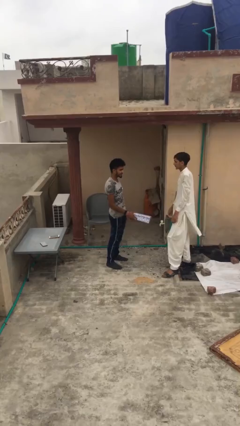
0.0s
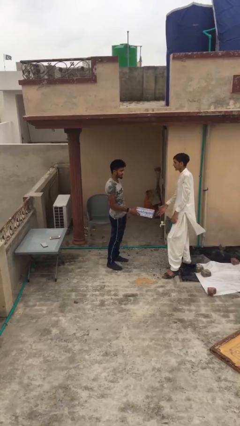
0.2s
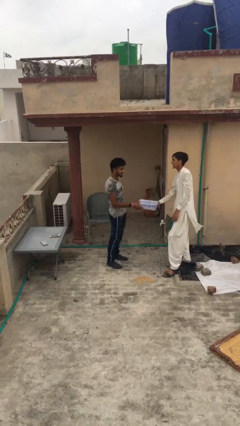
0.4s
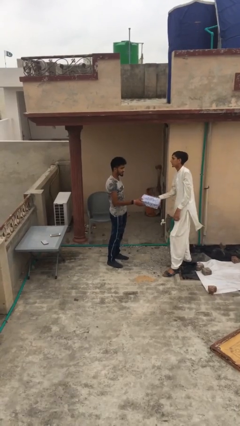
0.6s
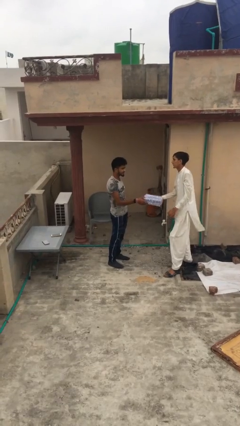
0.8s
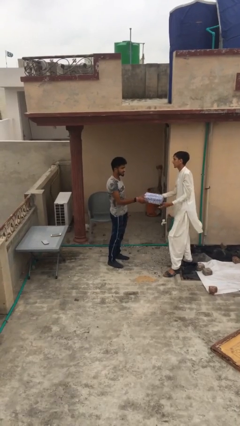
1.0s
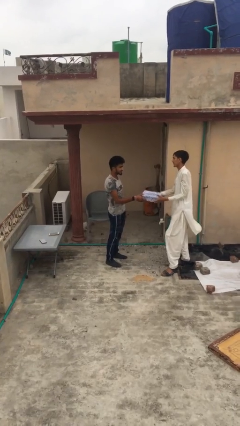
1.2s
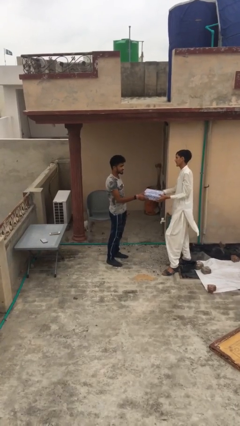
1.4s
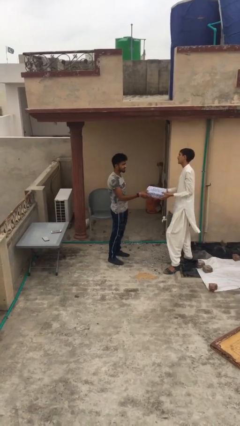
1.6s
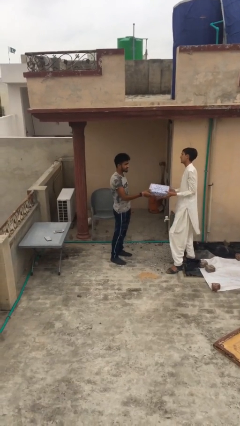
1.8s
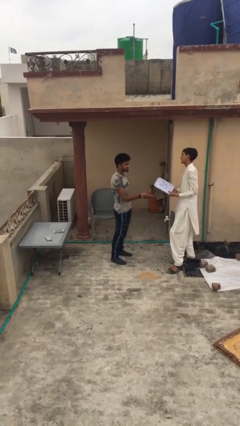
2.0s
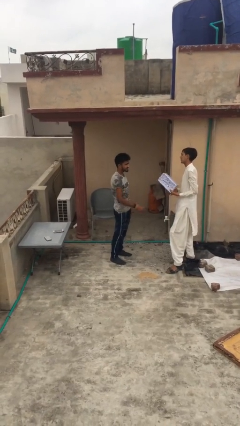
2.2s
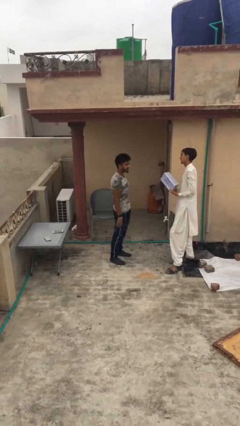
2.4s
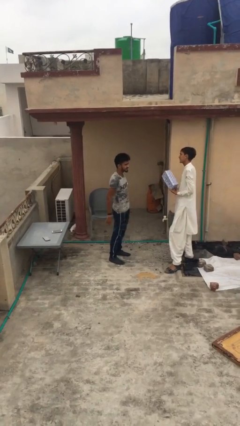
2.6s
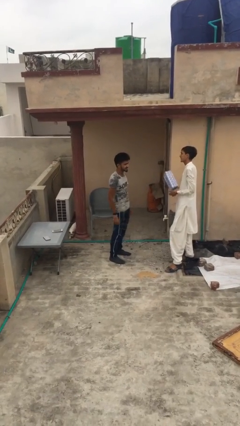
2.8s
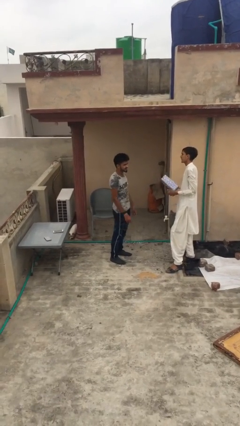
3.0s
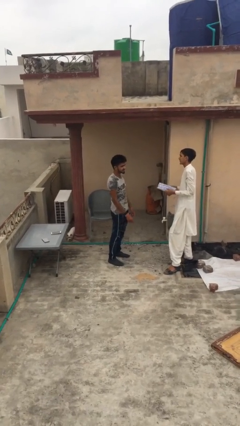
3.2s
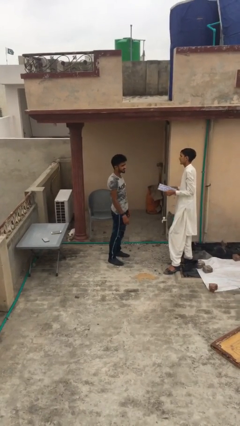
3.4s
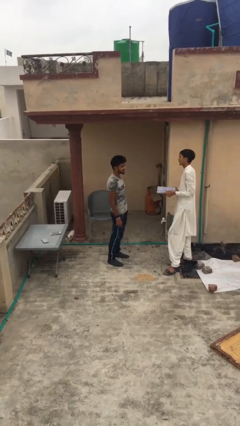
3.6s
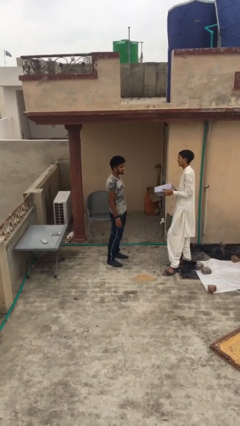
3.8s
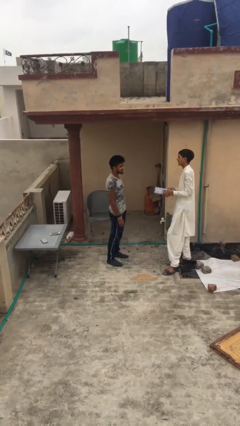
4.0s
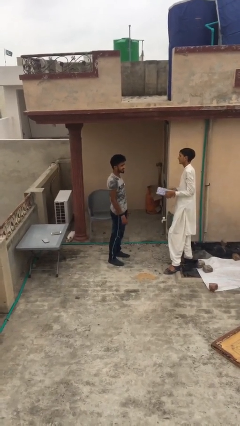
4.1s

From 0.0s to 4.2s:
person transfers object to person

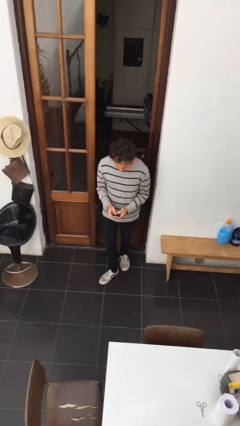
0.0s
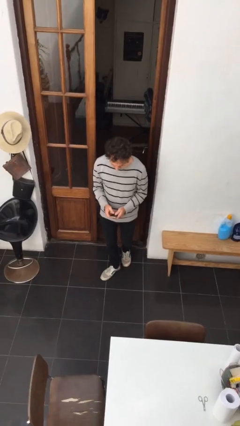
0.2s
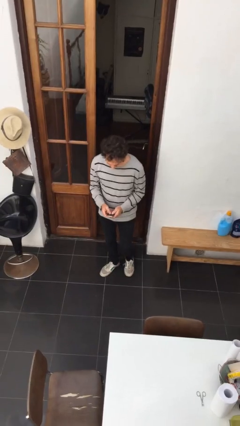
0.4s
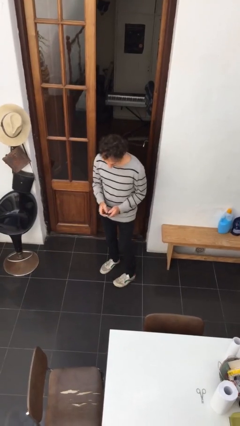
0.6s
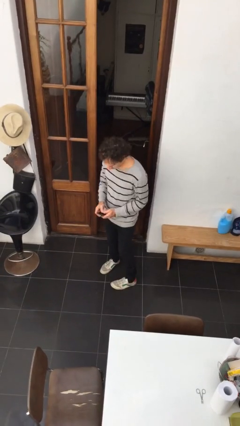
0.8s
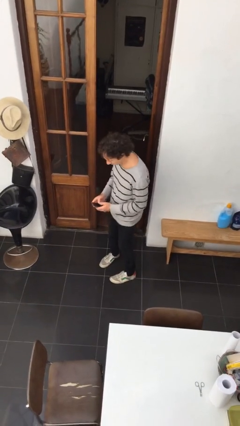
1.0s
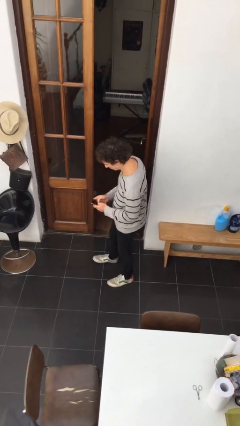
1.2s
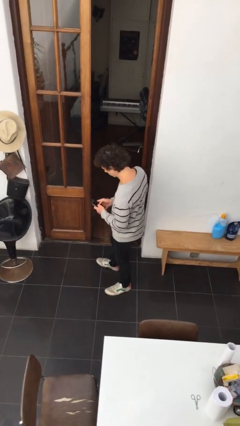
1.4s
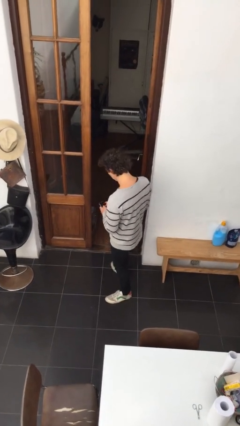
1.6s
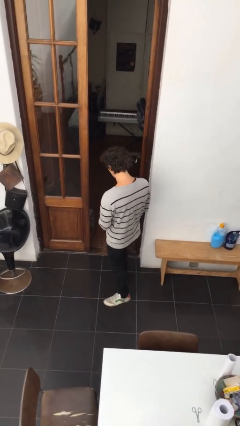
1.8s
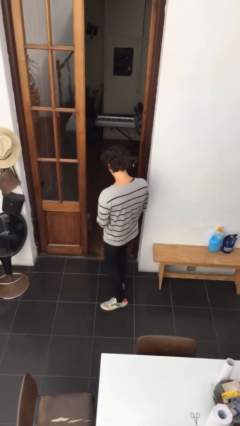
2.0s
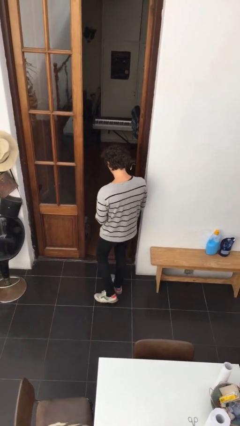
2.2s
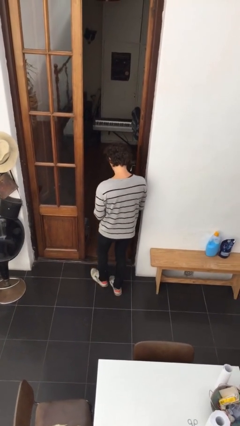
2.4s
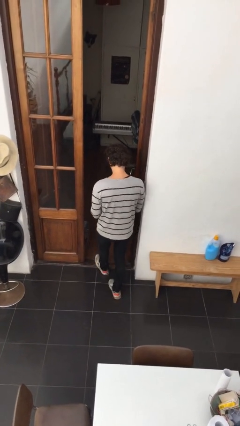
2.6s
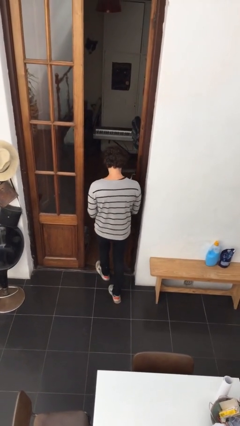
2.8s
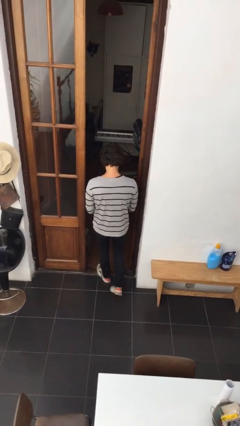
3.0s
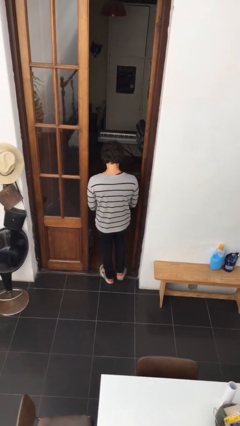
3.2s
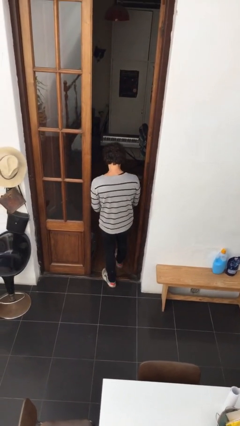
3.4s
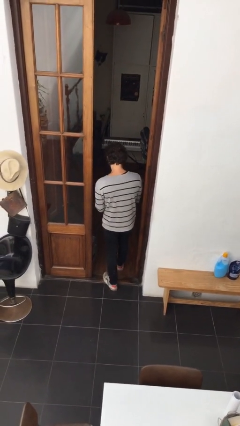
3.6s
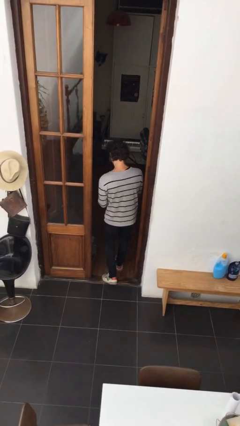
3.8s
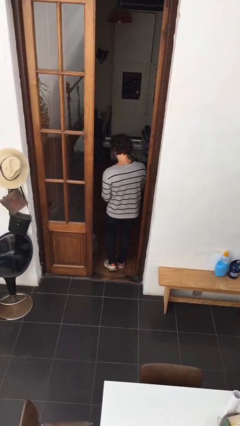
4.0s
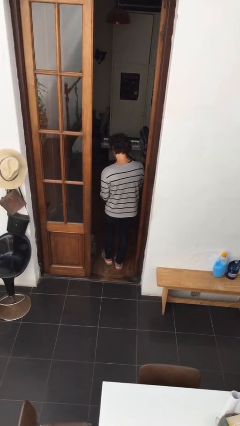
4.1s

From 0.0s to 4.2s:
person exits scene through structure

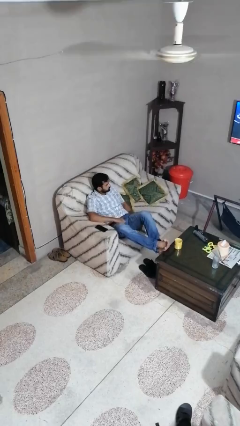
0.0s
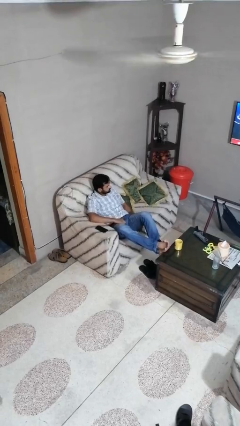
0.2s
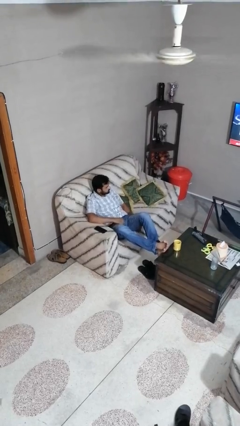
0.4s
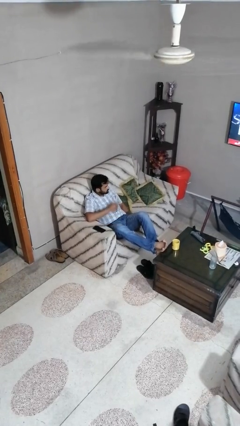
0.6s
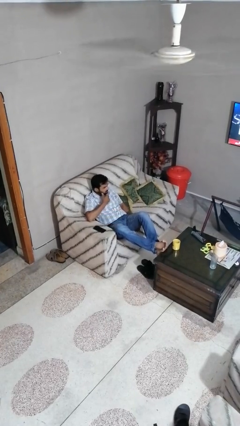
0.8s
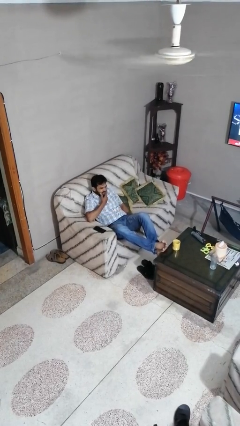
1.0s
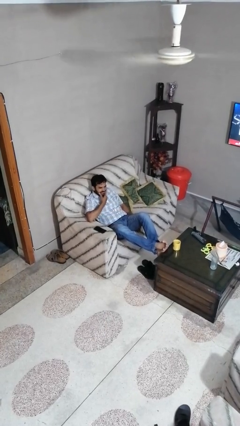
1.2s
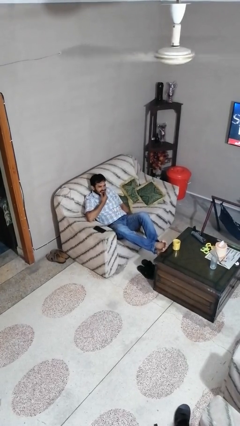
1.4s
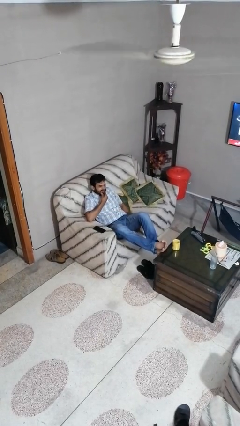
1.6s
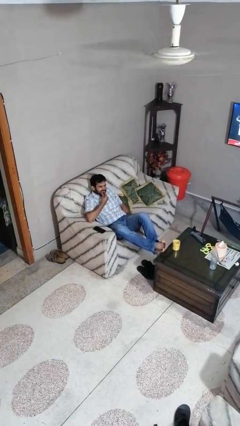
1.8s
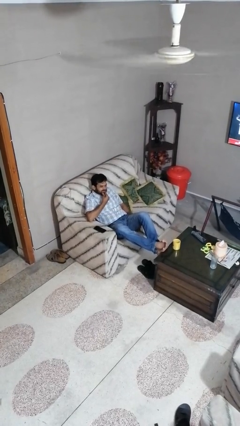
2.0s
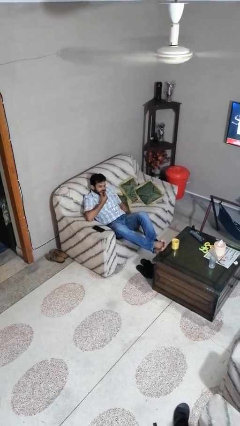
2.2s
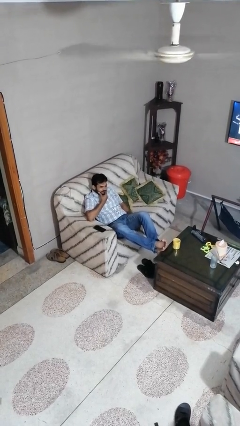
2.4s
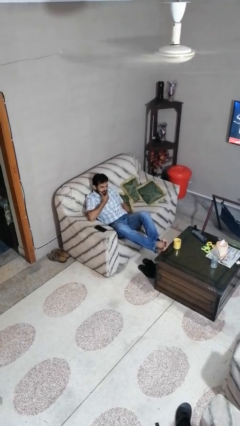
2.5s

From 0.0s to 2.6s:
person strokes chin

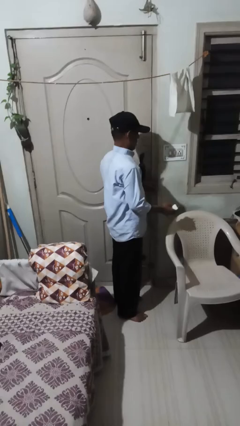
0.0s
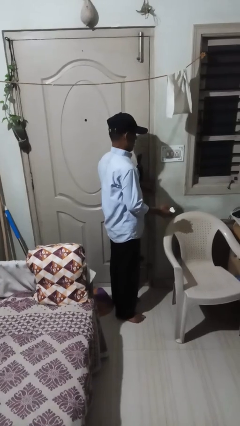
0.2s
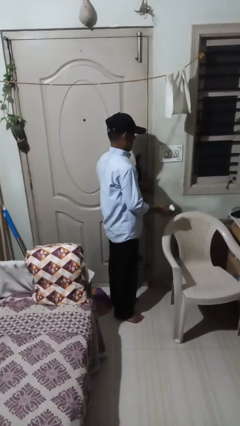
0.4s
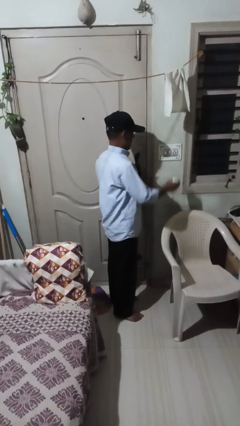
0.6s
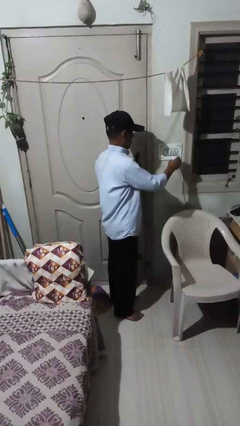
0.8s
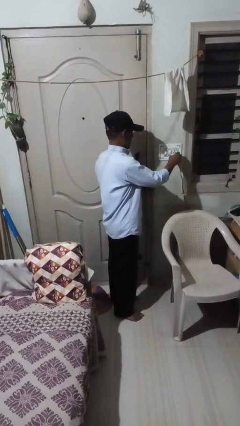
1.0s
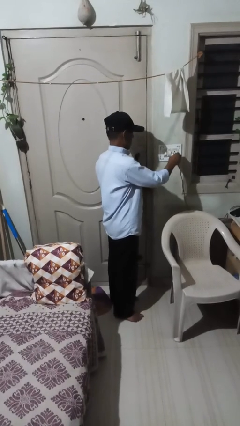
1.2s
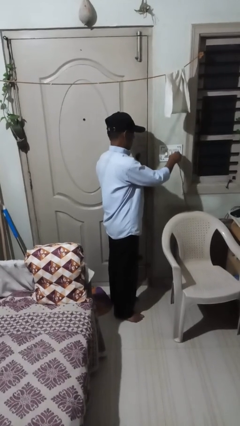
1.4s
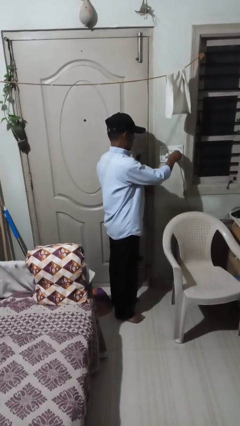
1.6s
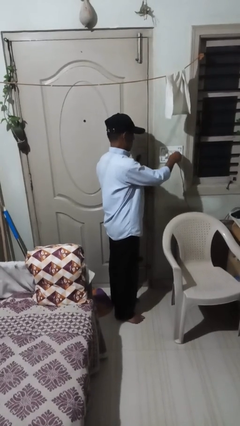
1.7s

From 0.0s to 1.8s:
person plugs into electrical socket

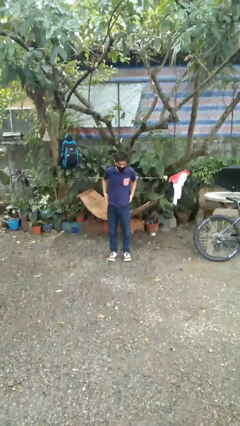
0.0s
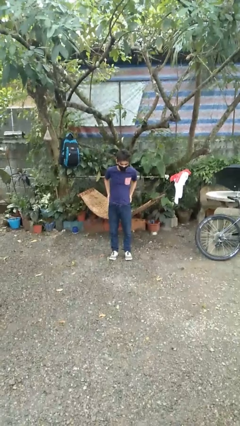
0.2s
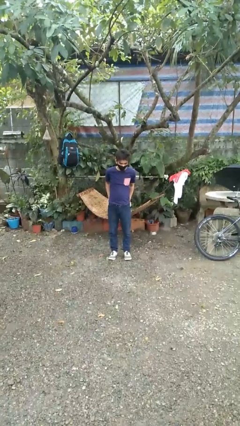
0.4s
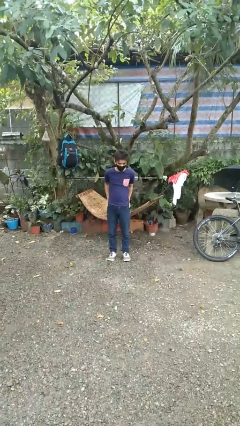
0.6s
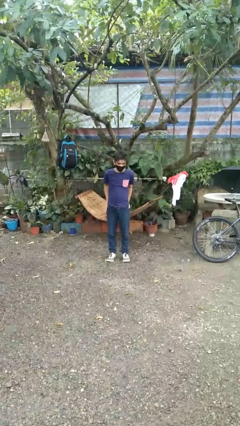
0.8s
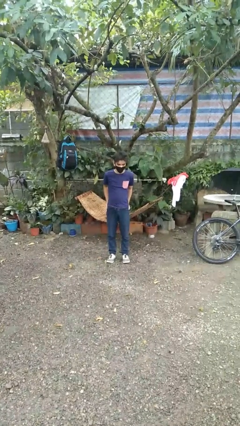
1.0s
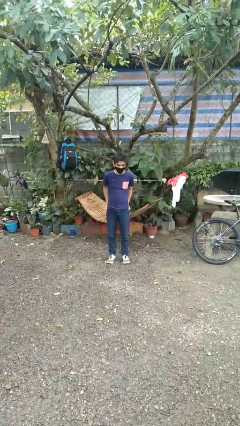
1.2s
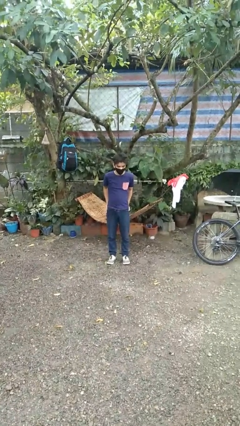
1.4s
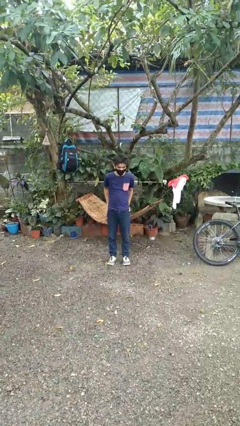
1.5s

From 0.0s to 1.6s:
person puts hands in back pockets

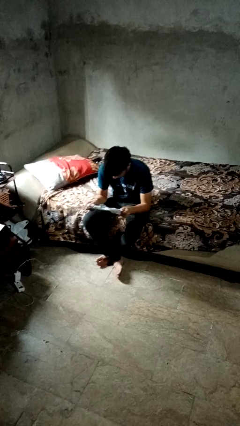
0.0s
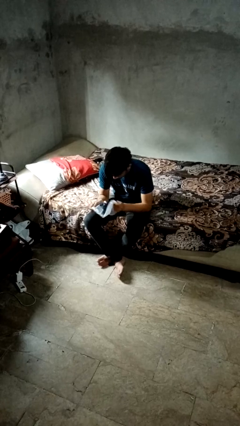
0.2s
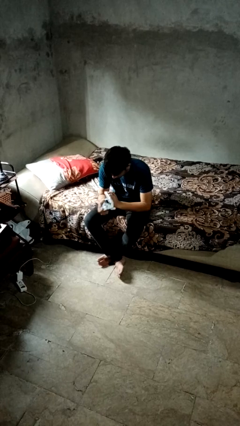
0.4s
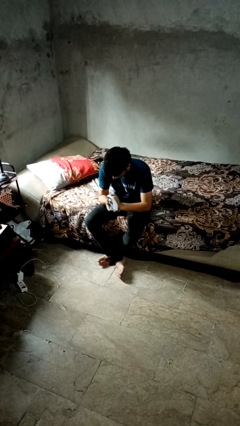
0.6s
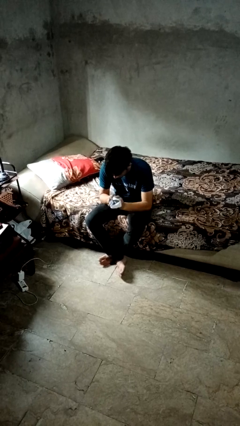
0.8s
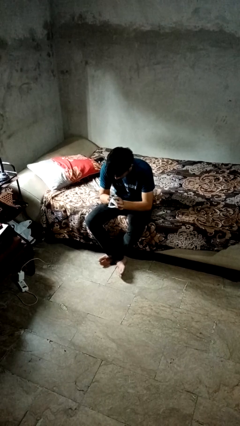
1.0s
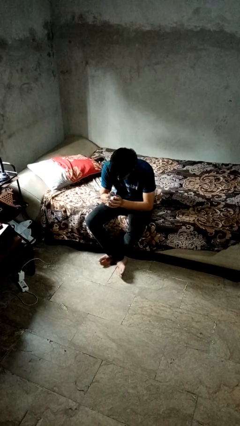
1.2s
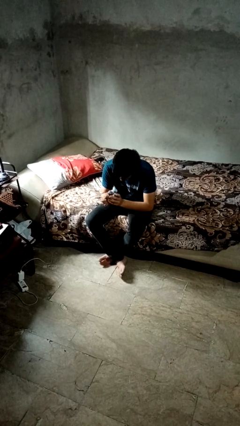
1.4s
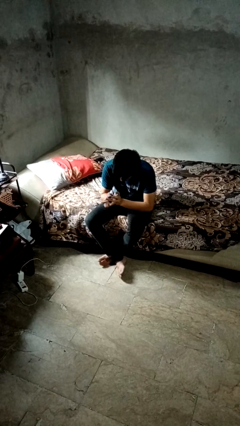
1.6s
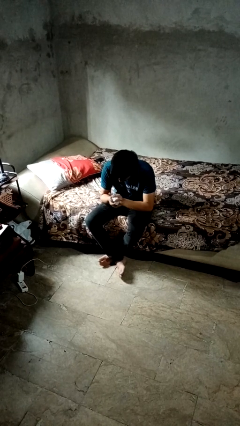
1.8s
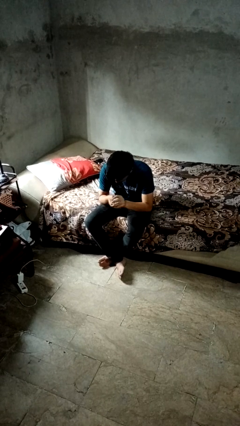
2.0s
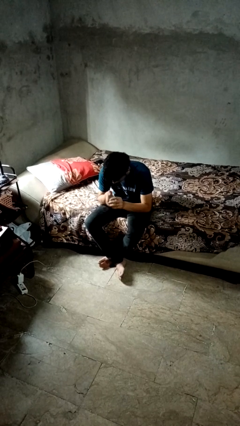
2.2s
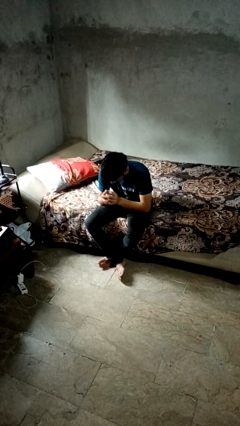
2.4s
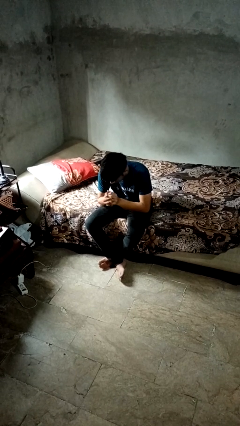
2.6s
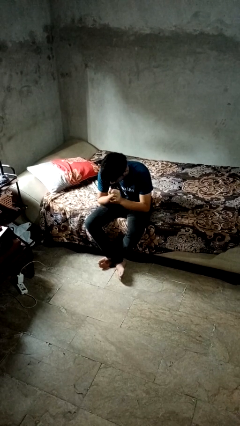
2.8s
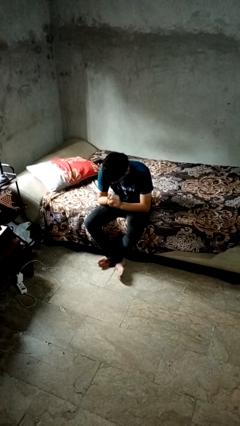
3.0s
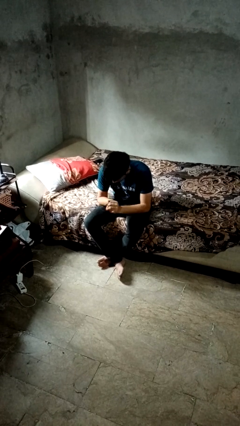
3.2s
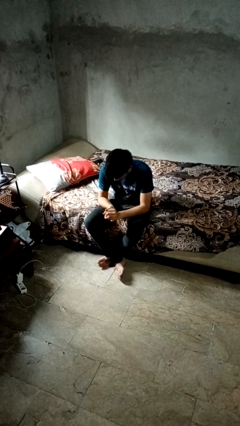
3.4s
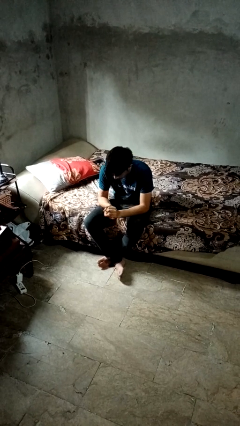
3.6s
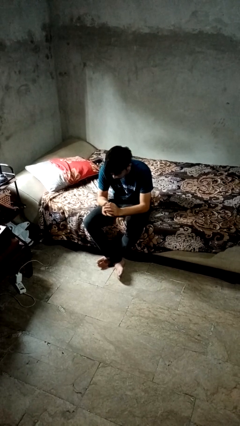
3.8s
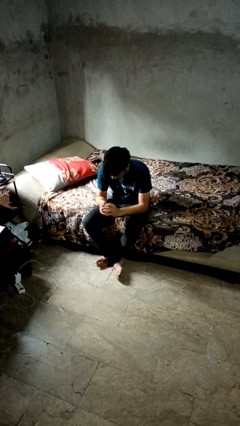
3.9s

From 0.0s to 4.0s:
person crumples paper
